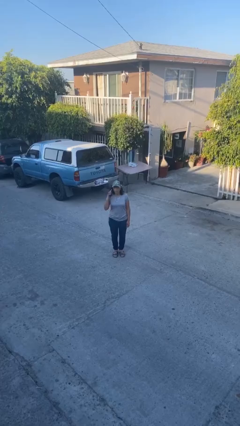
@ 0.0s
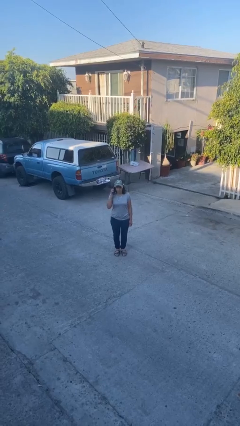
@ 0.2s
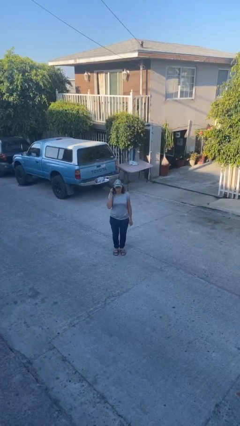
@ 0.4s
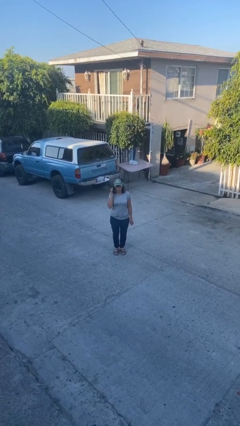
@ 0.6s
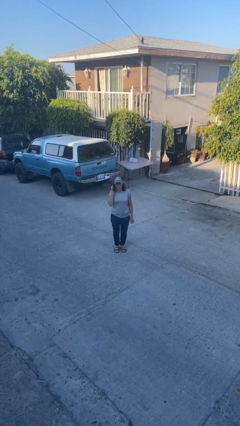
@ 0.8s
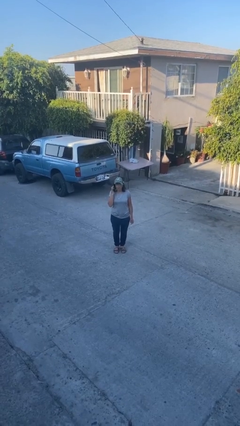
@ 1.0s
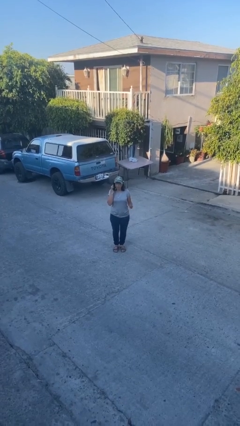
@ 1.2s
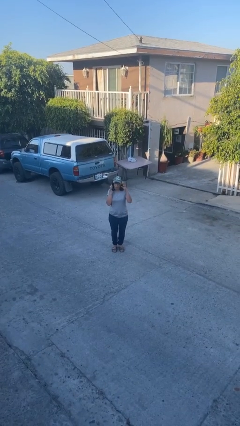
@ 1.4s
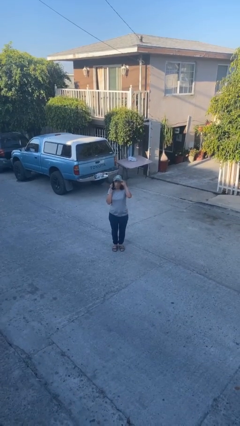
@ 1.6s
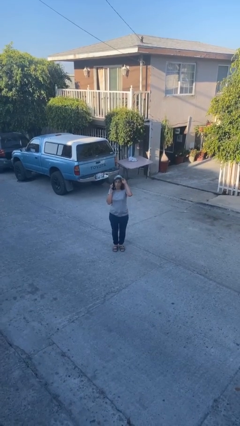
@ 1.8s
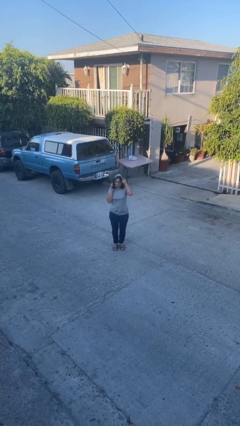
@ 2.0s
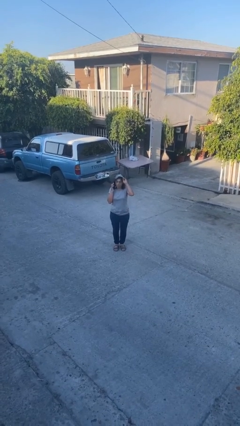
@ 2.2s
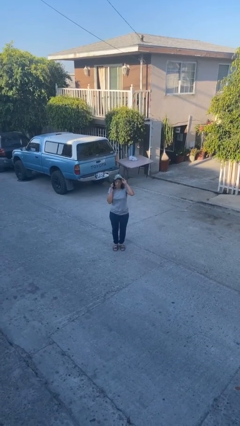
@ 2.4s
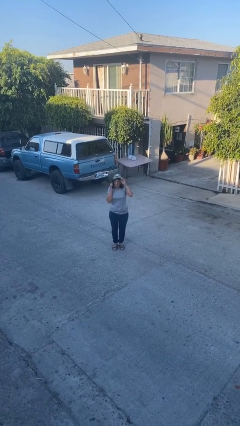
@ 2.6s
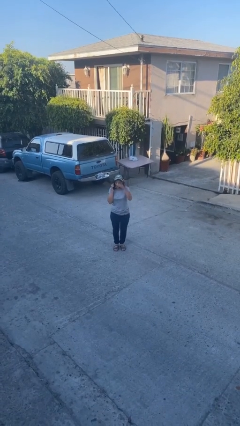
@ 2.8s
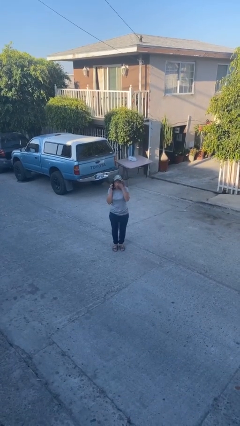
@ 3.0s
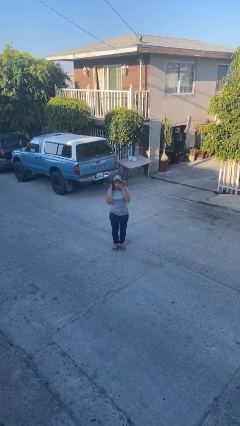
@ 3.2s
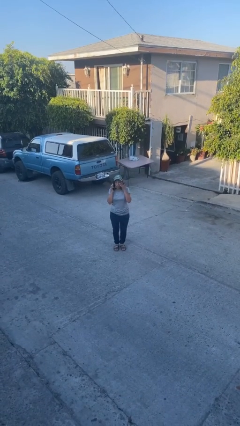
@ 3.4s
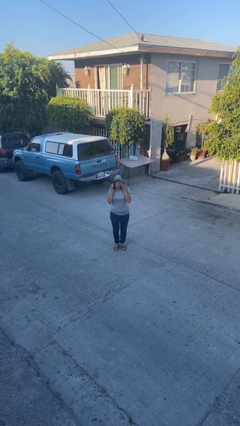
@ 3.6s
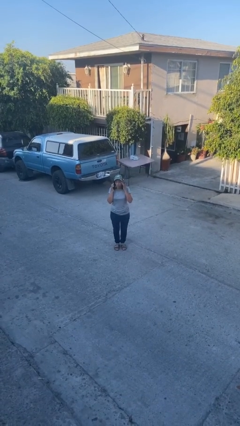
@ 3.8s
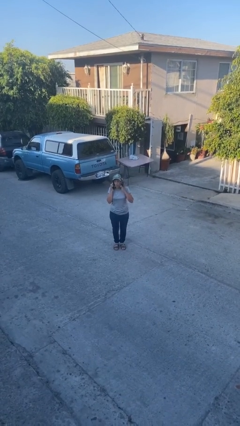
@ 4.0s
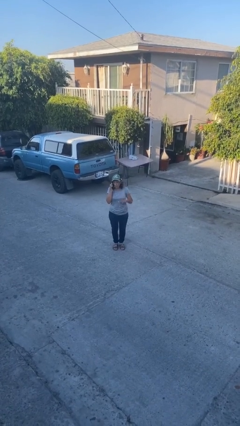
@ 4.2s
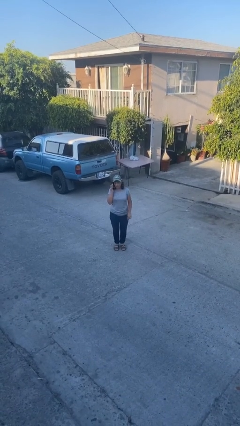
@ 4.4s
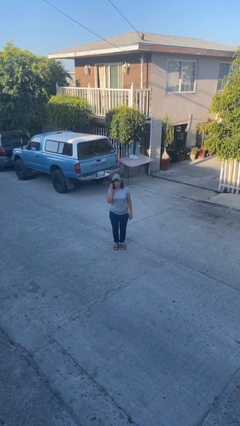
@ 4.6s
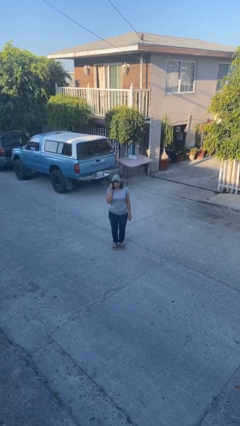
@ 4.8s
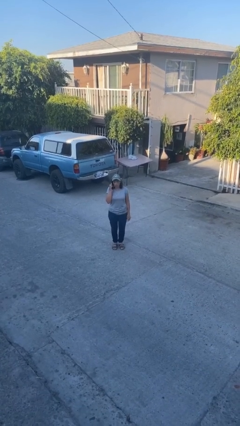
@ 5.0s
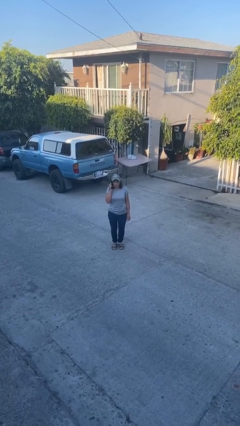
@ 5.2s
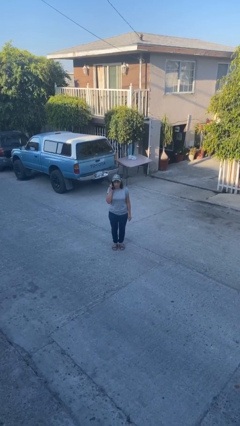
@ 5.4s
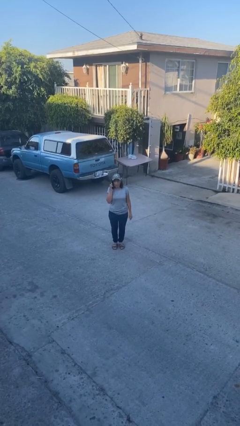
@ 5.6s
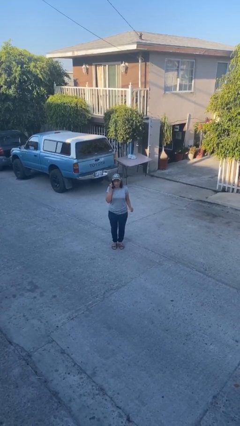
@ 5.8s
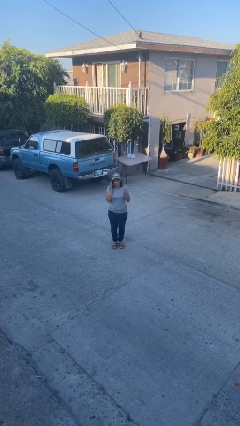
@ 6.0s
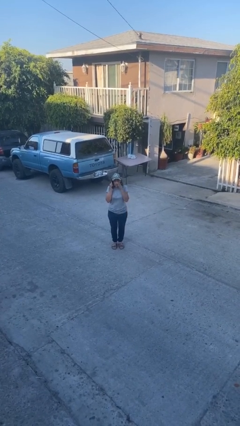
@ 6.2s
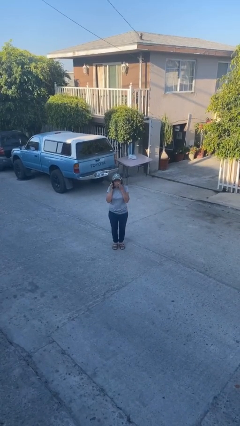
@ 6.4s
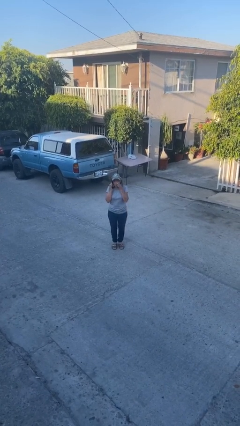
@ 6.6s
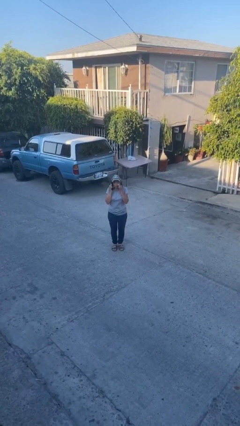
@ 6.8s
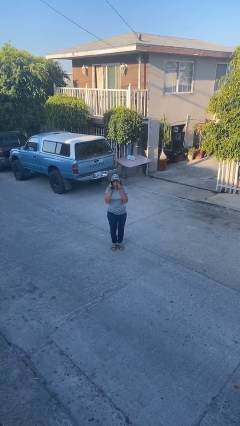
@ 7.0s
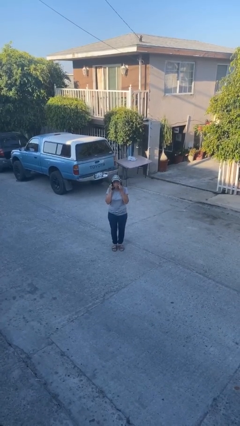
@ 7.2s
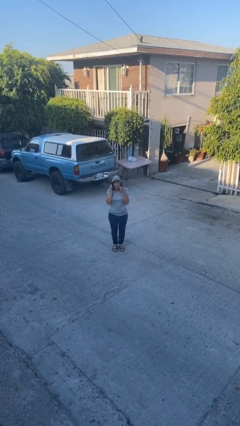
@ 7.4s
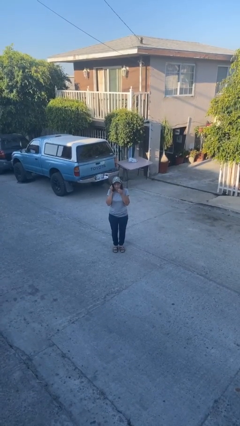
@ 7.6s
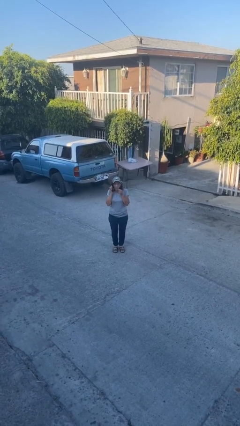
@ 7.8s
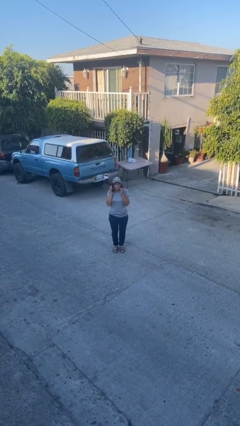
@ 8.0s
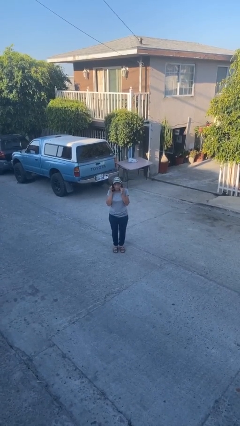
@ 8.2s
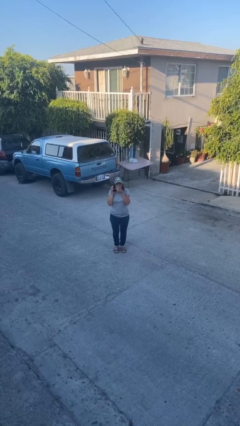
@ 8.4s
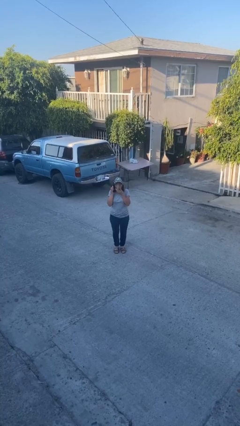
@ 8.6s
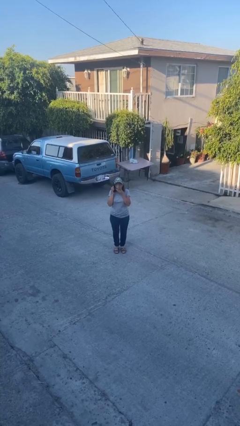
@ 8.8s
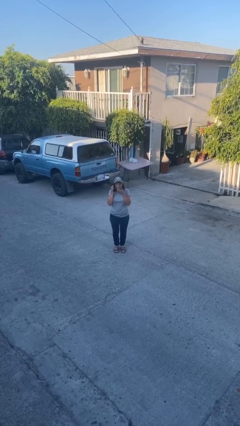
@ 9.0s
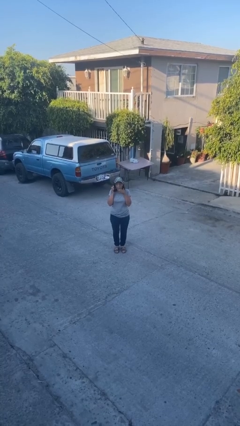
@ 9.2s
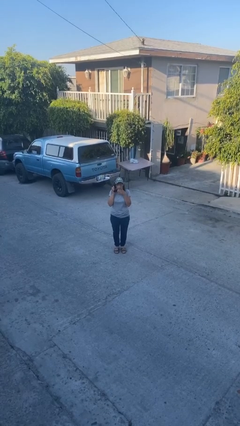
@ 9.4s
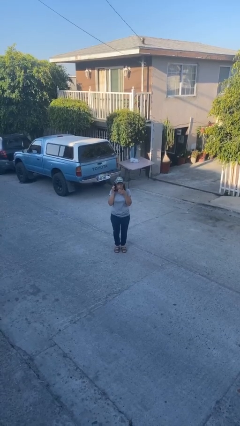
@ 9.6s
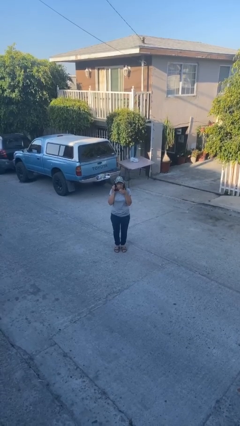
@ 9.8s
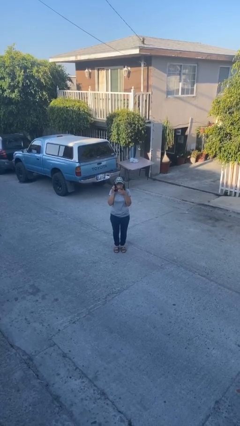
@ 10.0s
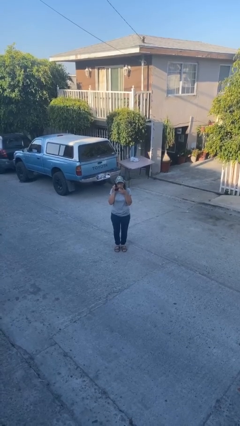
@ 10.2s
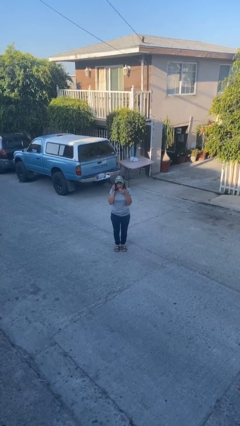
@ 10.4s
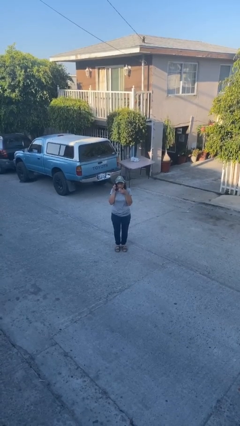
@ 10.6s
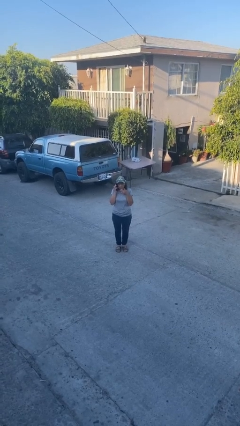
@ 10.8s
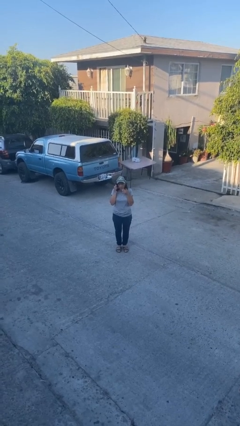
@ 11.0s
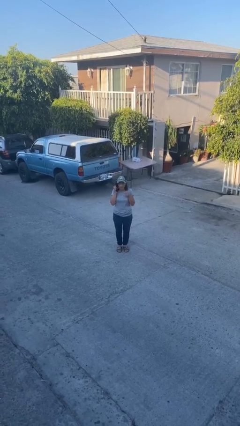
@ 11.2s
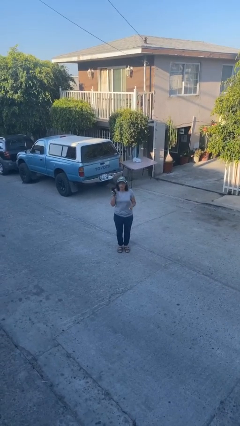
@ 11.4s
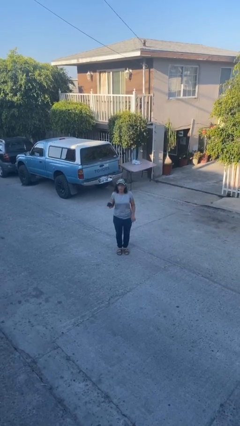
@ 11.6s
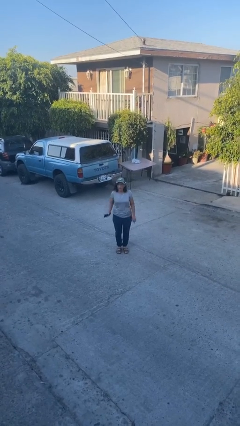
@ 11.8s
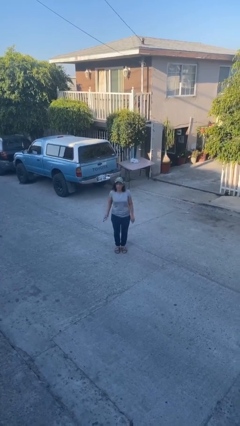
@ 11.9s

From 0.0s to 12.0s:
person talks on phone

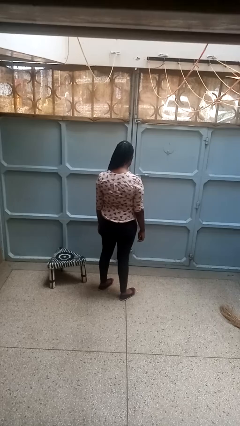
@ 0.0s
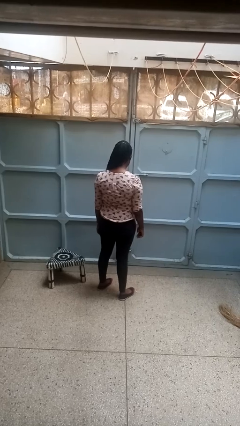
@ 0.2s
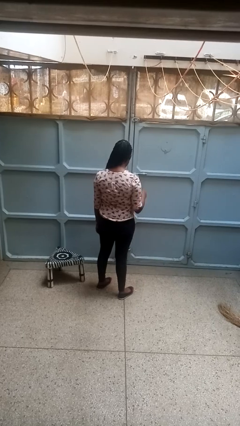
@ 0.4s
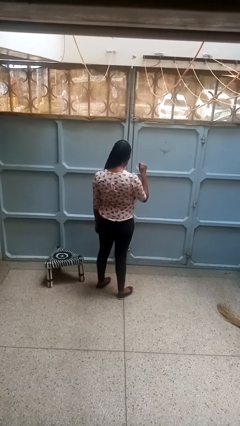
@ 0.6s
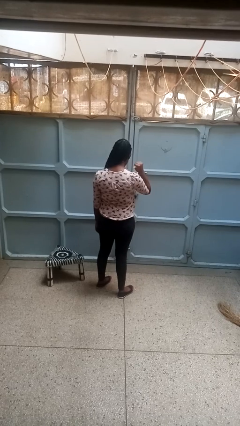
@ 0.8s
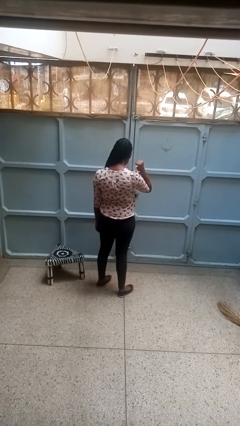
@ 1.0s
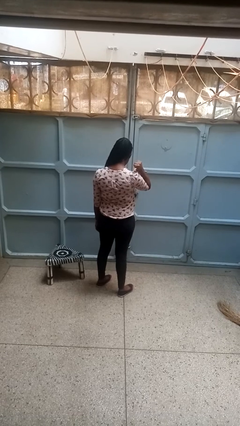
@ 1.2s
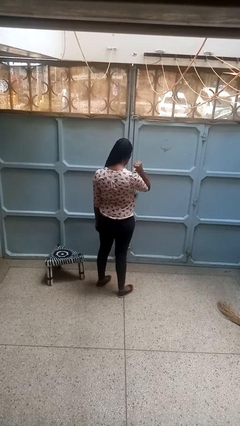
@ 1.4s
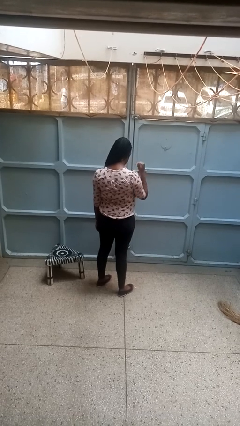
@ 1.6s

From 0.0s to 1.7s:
person gestures behind me

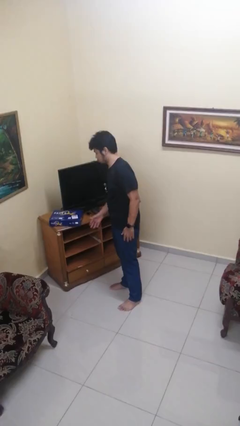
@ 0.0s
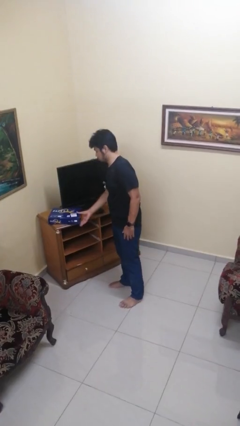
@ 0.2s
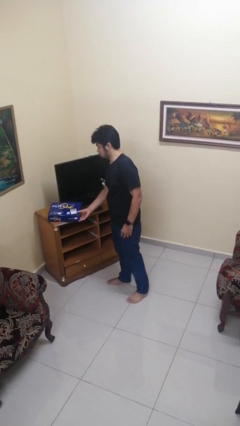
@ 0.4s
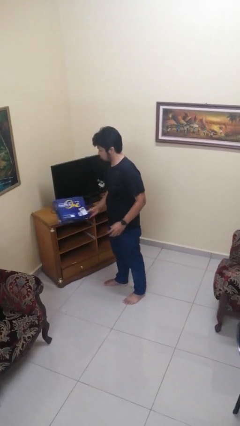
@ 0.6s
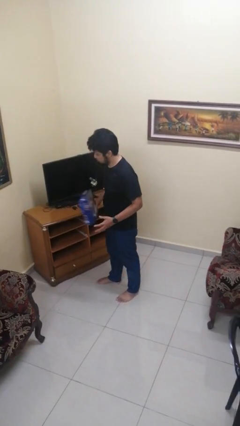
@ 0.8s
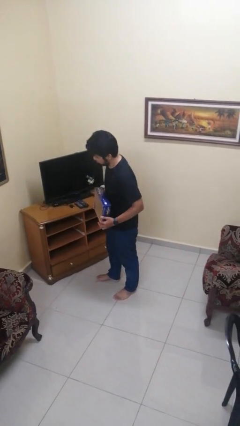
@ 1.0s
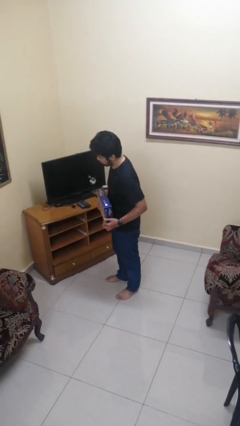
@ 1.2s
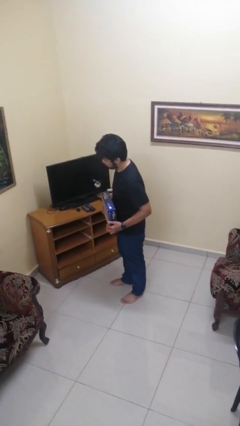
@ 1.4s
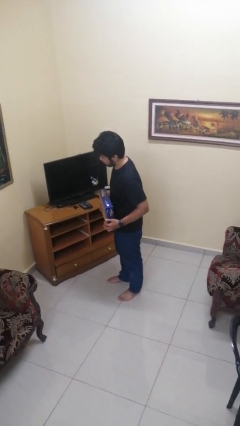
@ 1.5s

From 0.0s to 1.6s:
person picks up object from countertop

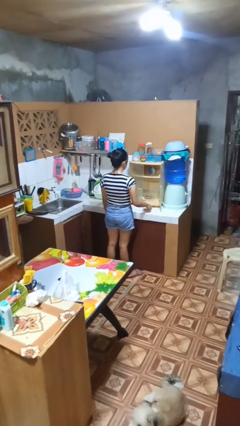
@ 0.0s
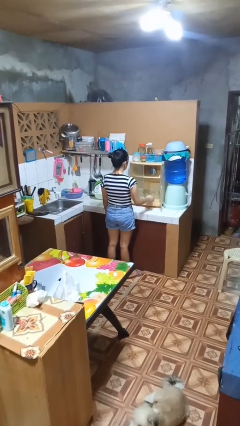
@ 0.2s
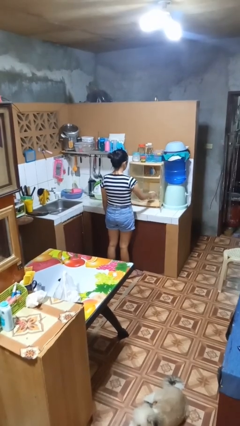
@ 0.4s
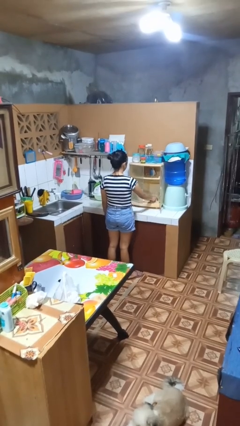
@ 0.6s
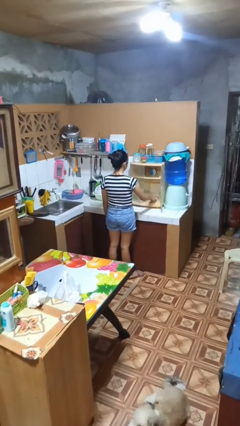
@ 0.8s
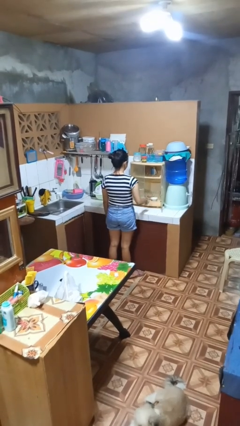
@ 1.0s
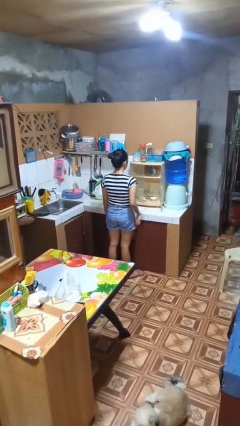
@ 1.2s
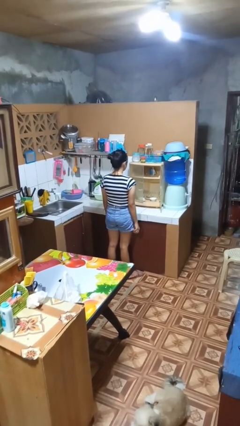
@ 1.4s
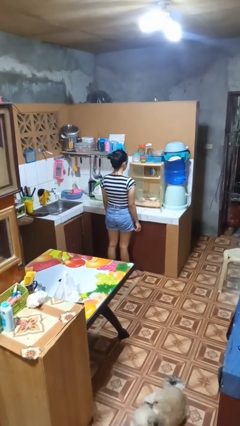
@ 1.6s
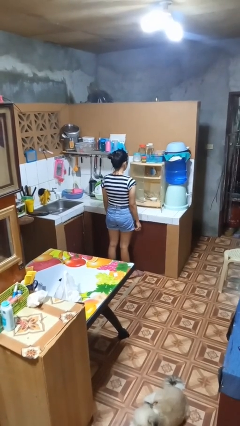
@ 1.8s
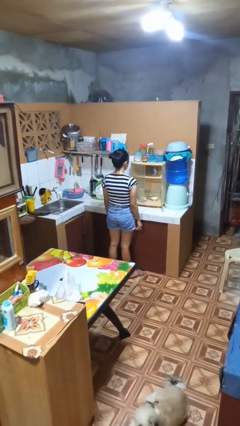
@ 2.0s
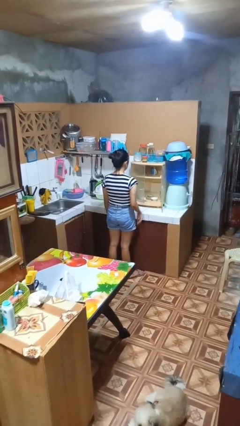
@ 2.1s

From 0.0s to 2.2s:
person puts object in cabinet

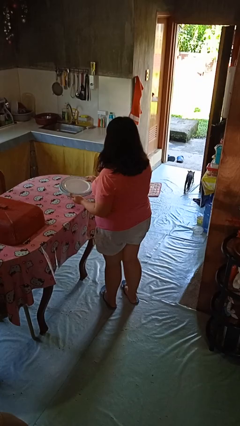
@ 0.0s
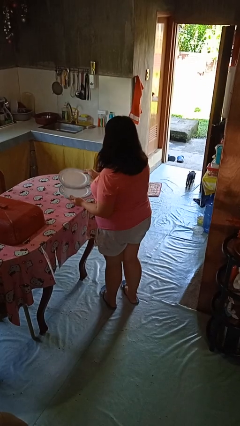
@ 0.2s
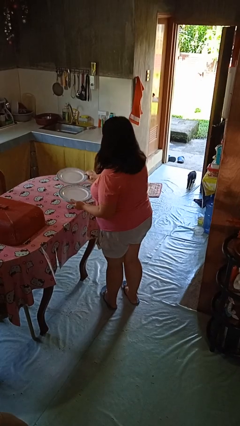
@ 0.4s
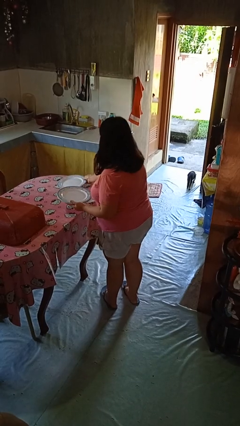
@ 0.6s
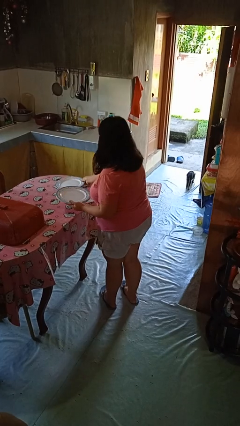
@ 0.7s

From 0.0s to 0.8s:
person sets table
